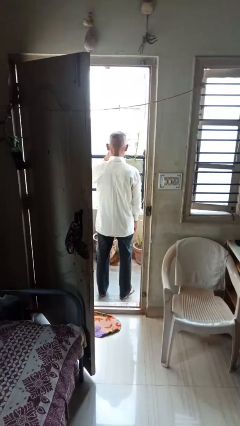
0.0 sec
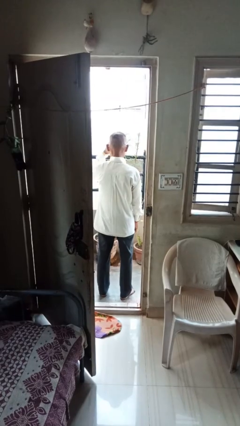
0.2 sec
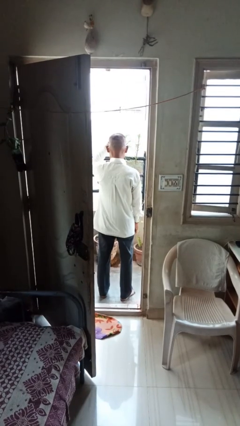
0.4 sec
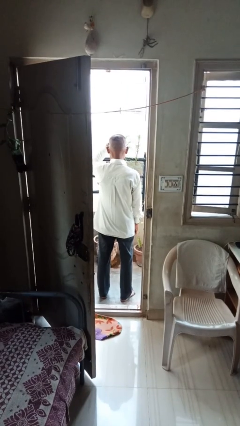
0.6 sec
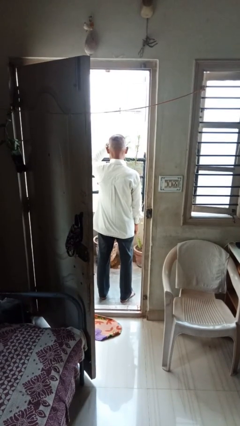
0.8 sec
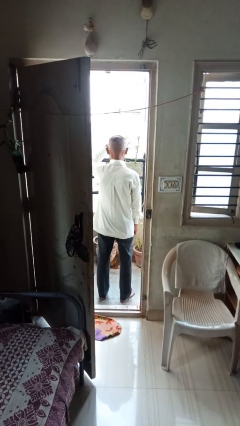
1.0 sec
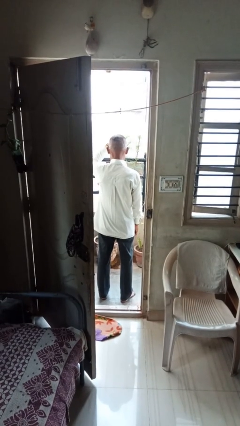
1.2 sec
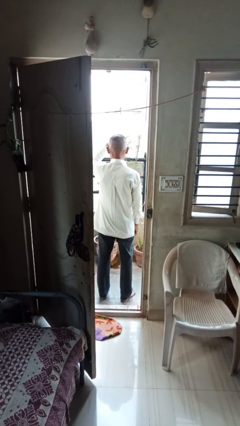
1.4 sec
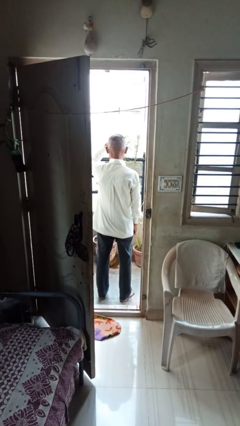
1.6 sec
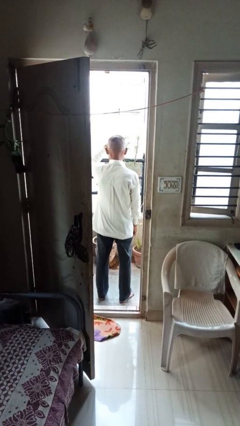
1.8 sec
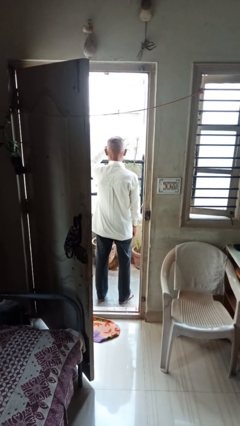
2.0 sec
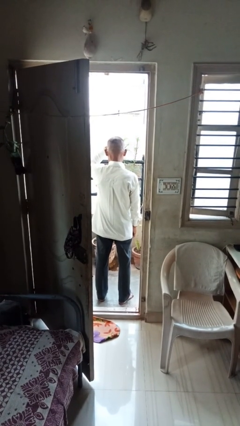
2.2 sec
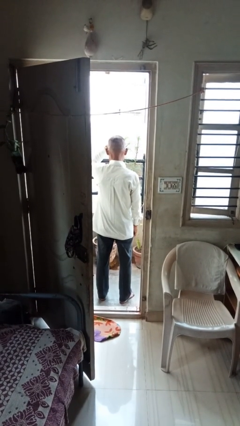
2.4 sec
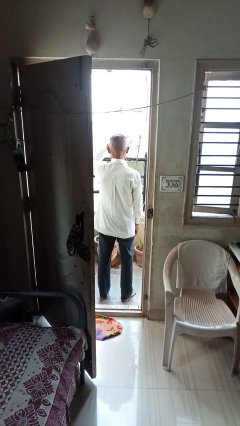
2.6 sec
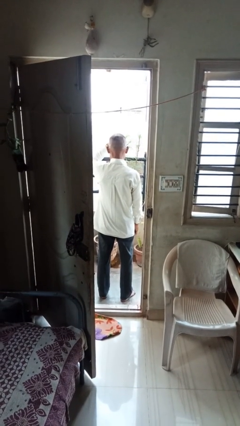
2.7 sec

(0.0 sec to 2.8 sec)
person shades eyes

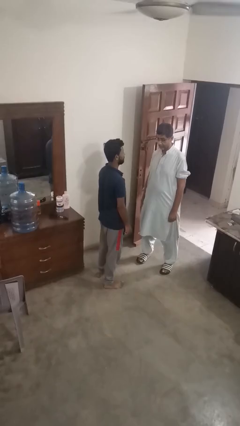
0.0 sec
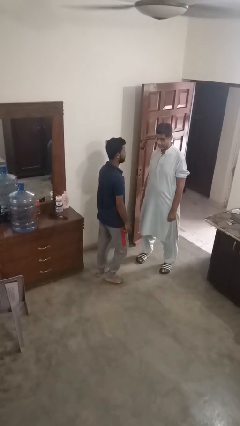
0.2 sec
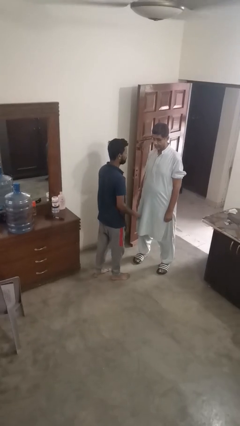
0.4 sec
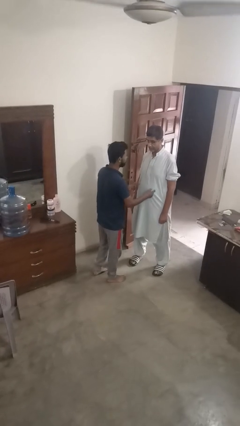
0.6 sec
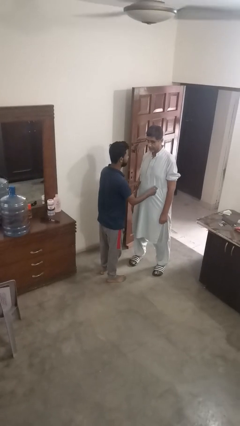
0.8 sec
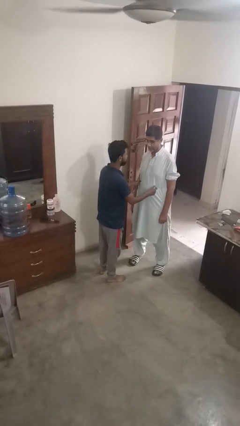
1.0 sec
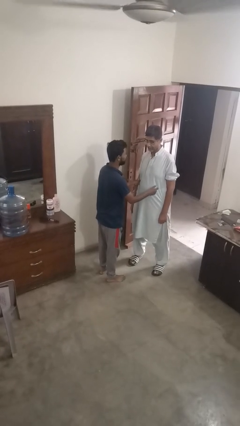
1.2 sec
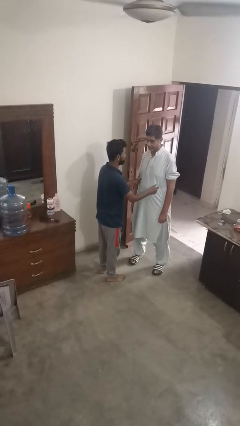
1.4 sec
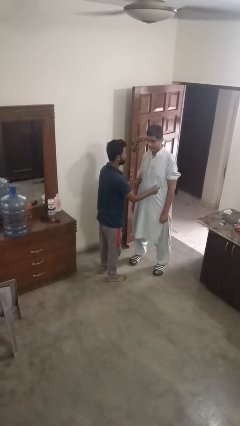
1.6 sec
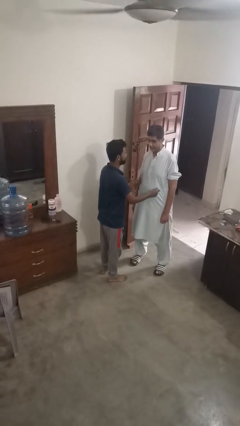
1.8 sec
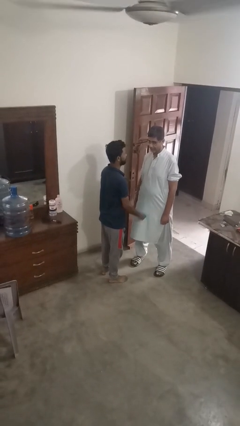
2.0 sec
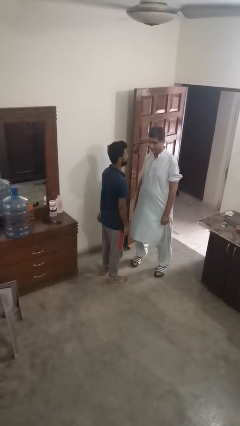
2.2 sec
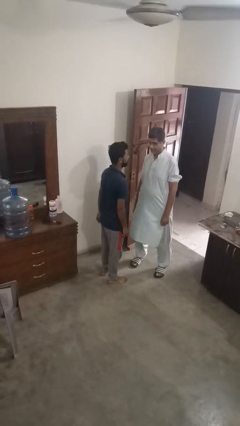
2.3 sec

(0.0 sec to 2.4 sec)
person tickles person

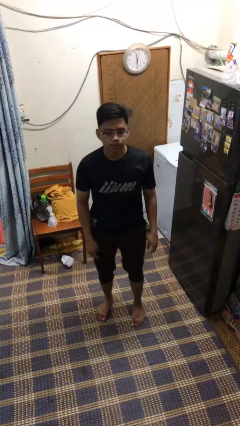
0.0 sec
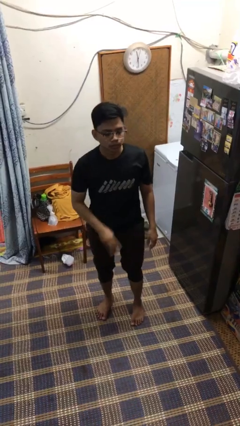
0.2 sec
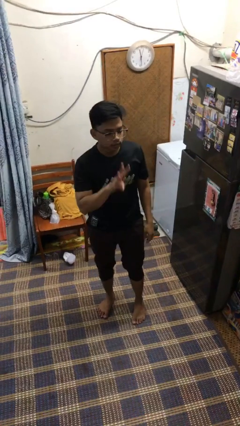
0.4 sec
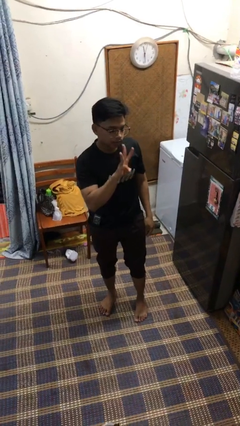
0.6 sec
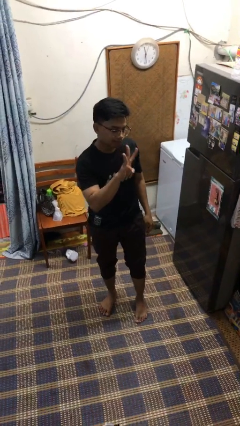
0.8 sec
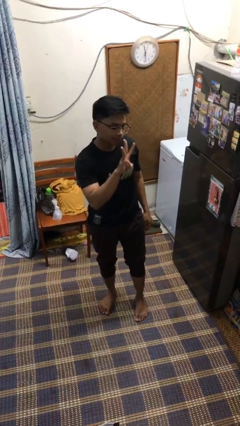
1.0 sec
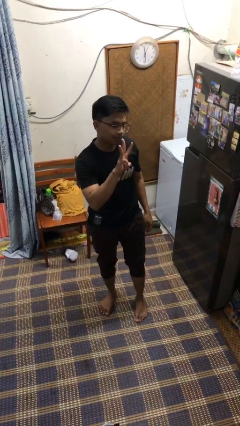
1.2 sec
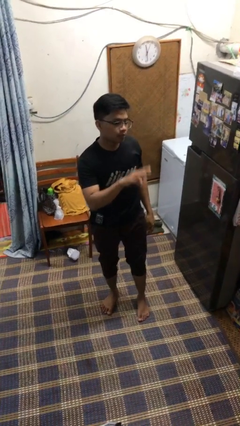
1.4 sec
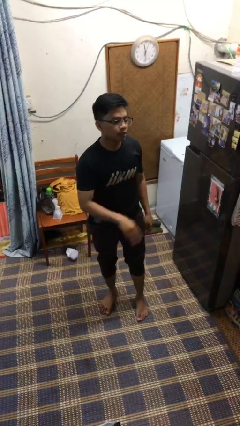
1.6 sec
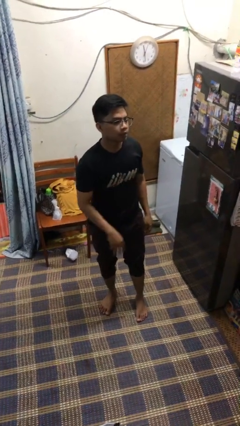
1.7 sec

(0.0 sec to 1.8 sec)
person gestures number three

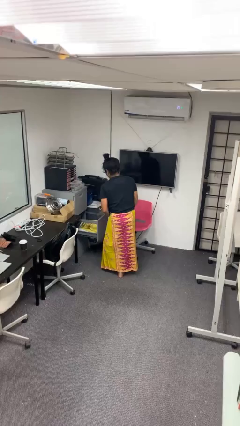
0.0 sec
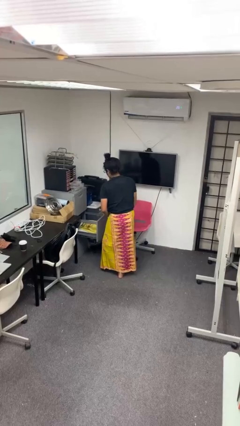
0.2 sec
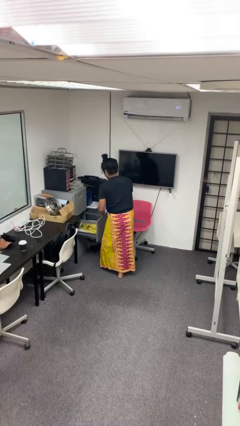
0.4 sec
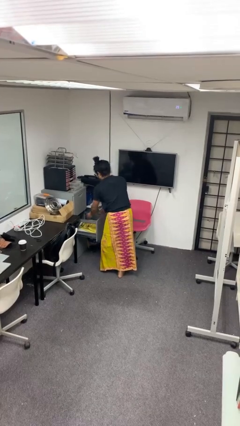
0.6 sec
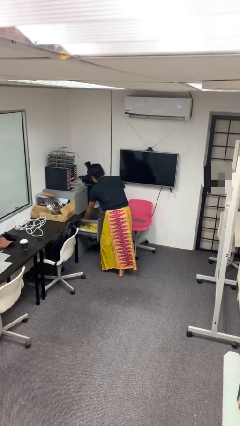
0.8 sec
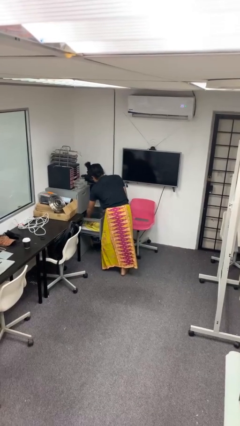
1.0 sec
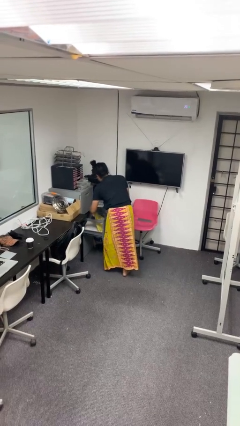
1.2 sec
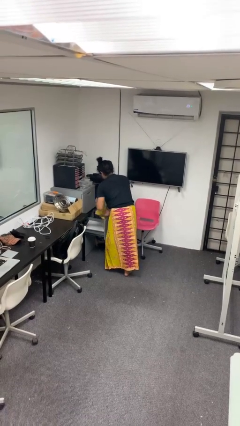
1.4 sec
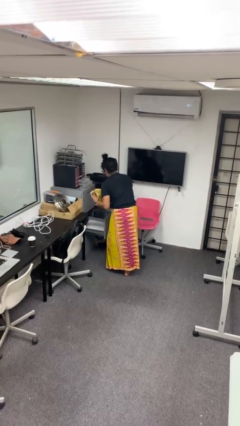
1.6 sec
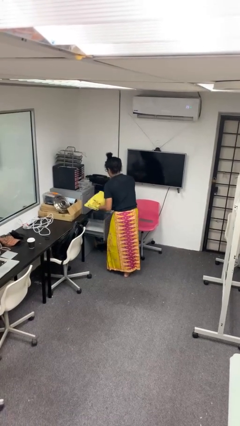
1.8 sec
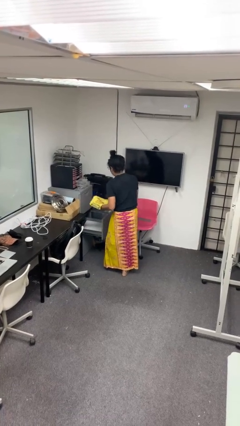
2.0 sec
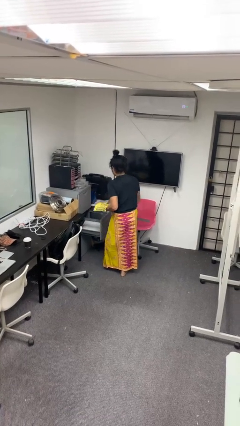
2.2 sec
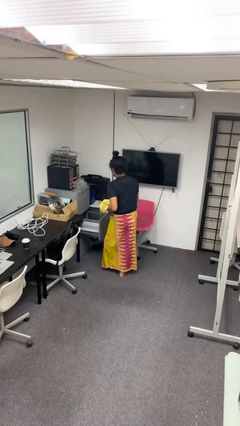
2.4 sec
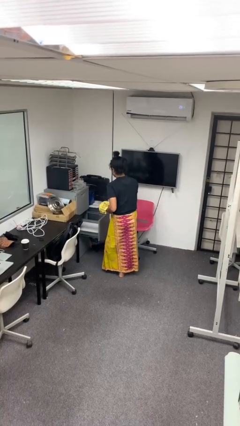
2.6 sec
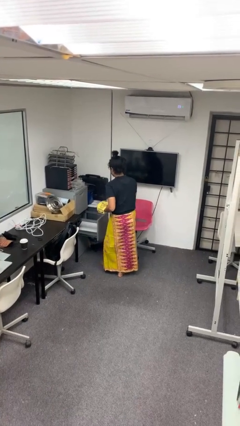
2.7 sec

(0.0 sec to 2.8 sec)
person takes clothes from dresser

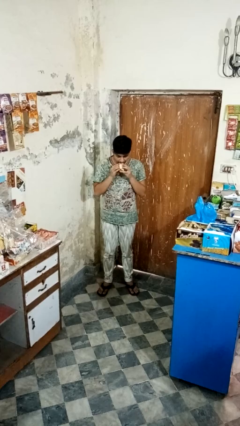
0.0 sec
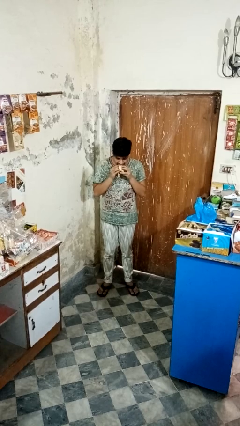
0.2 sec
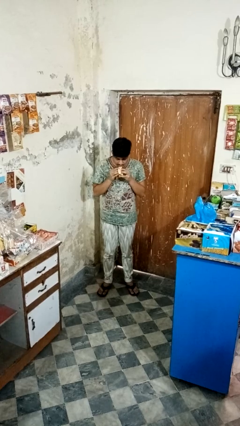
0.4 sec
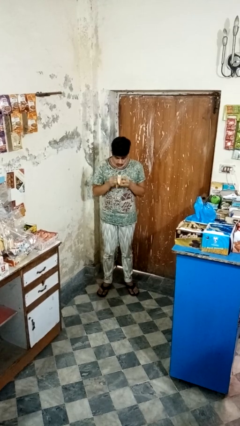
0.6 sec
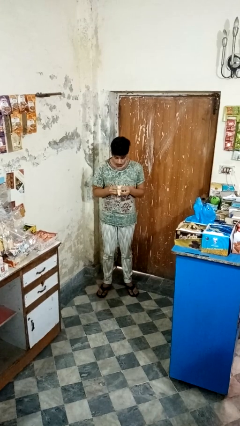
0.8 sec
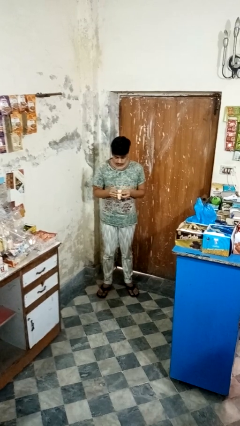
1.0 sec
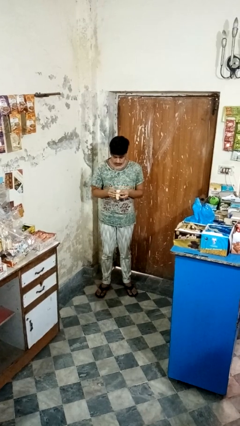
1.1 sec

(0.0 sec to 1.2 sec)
person eats banana

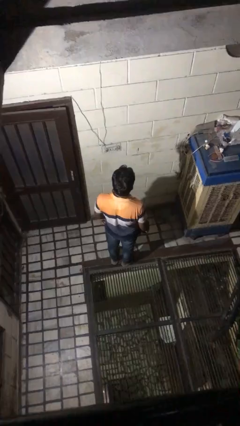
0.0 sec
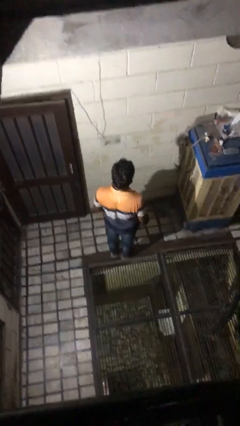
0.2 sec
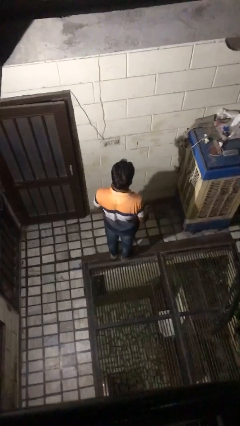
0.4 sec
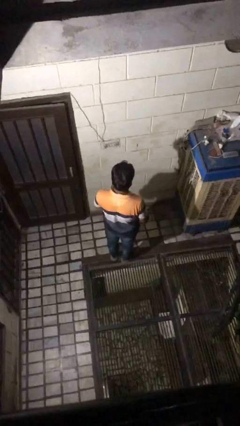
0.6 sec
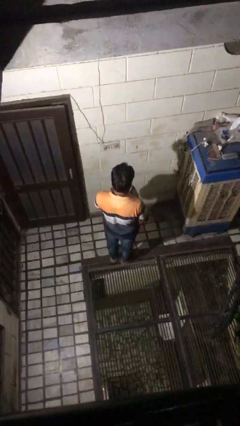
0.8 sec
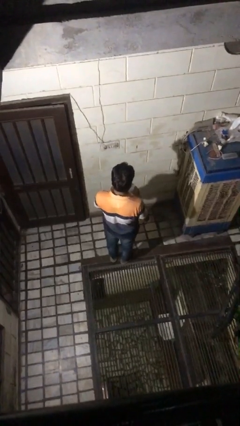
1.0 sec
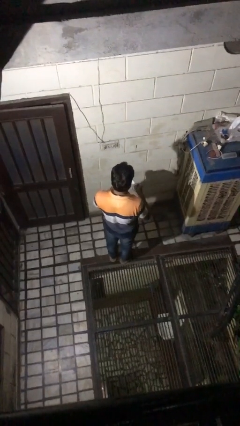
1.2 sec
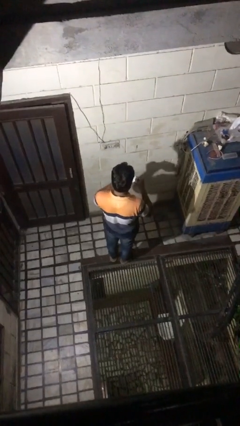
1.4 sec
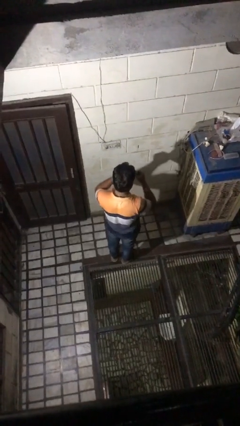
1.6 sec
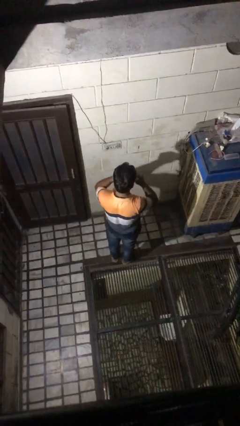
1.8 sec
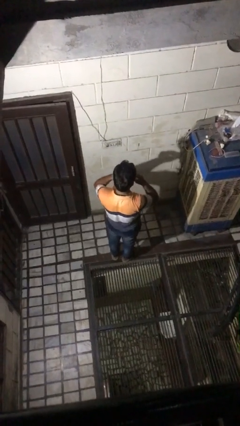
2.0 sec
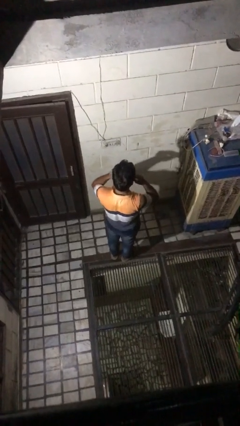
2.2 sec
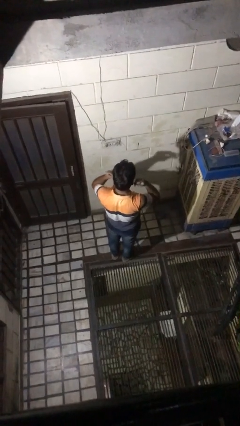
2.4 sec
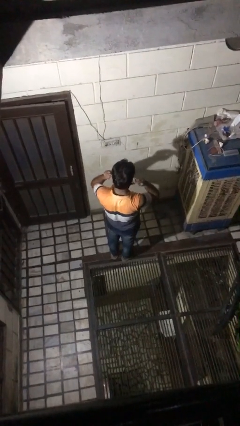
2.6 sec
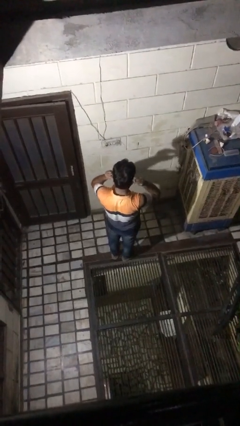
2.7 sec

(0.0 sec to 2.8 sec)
person puts on facemask

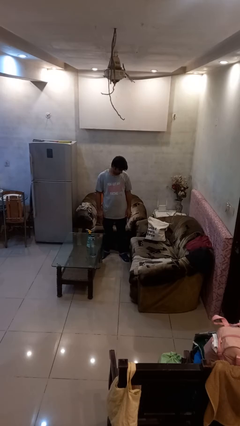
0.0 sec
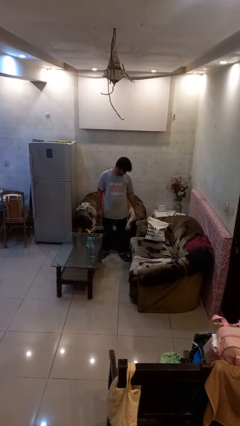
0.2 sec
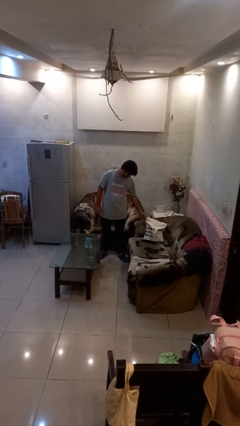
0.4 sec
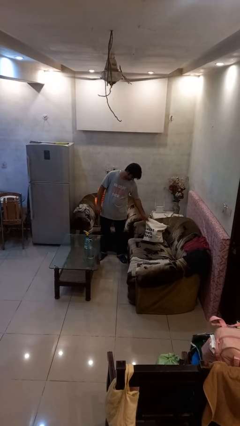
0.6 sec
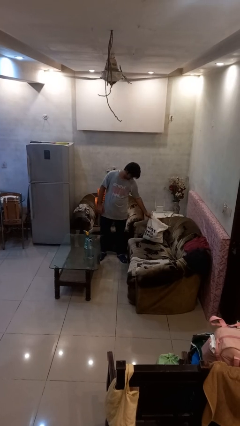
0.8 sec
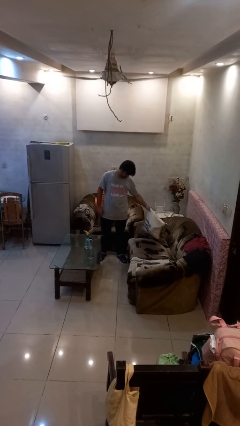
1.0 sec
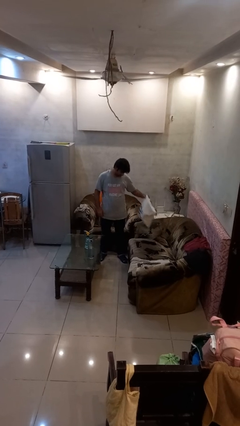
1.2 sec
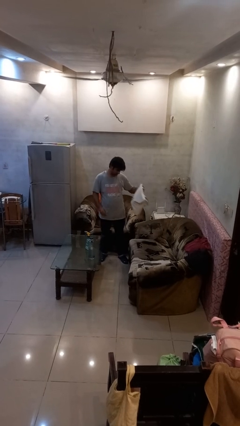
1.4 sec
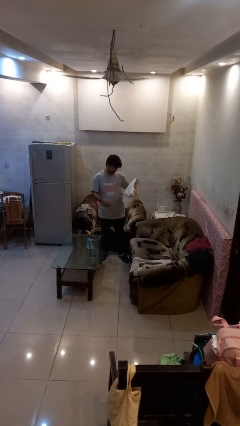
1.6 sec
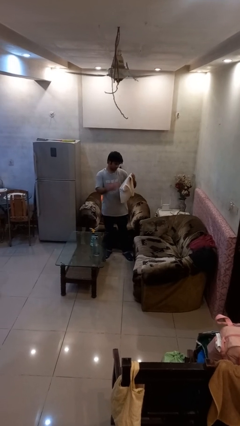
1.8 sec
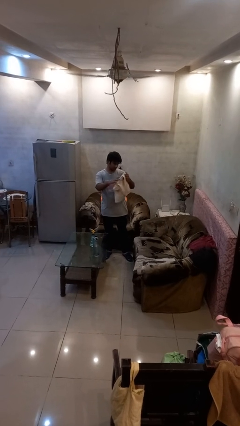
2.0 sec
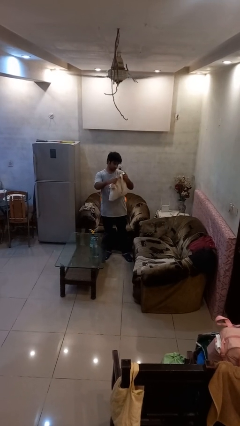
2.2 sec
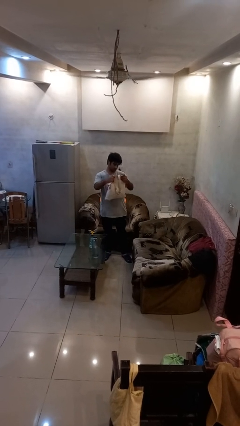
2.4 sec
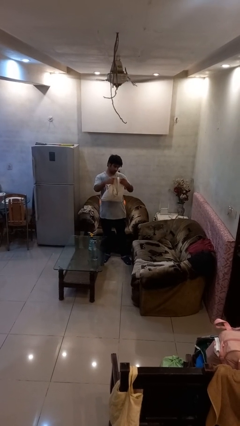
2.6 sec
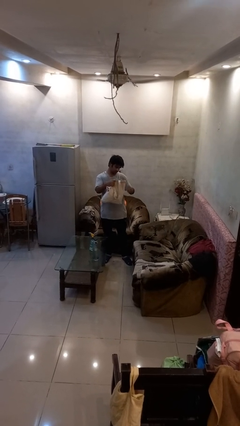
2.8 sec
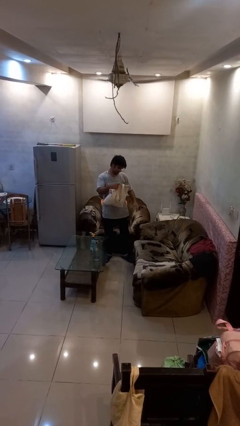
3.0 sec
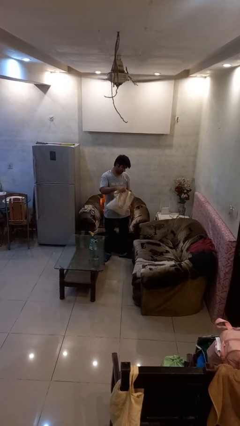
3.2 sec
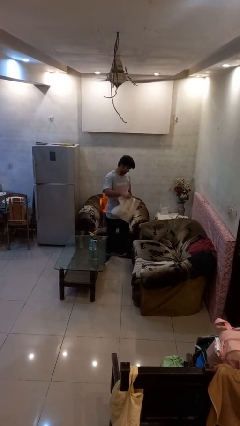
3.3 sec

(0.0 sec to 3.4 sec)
person picks up object from couch
